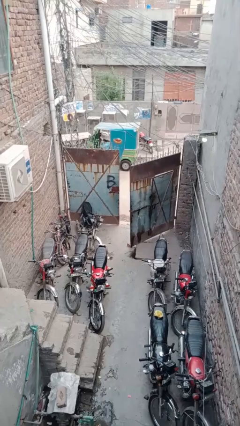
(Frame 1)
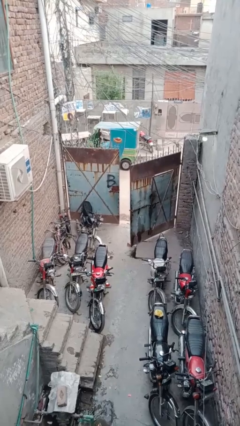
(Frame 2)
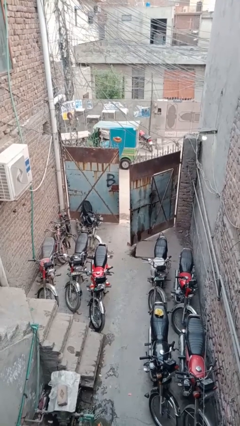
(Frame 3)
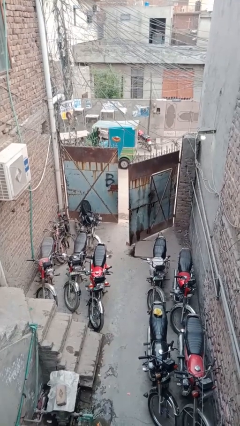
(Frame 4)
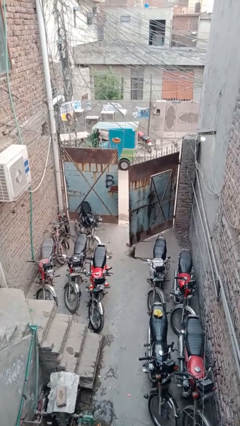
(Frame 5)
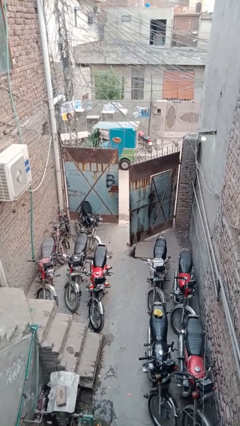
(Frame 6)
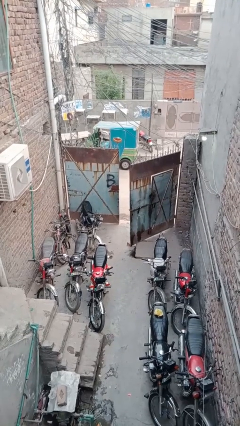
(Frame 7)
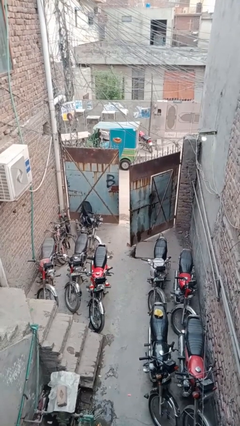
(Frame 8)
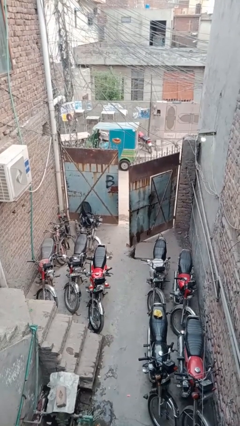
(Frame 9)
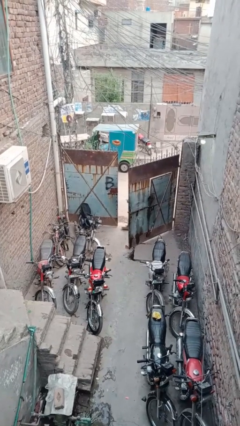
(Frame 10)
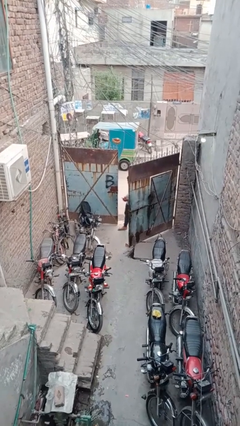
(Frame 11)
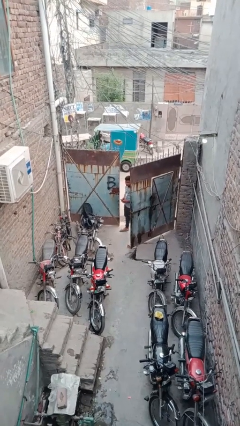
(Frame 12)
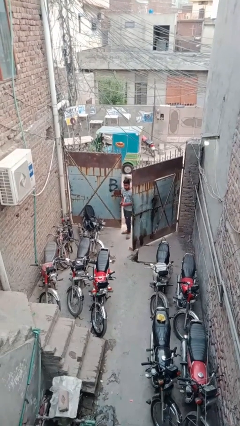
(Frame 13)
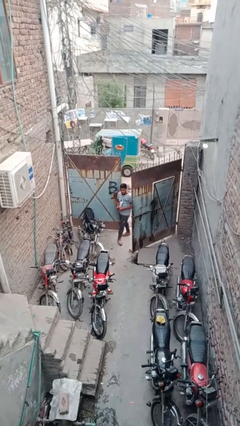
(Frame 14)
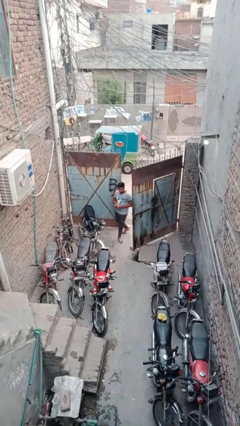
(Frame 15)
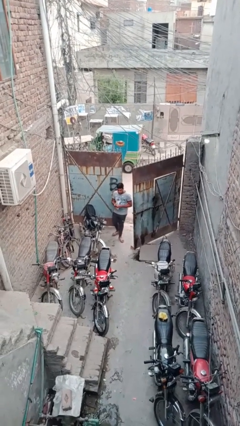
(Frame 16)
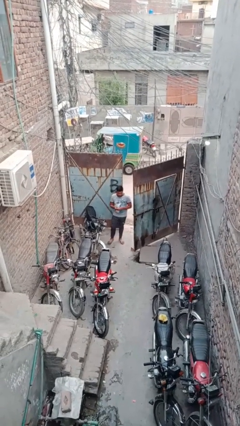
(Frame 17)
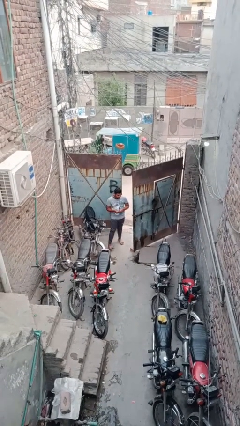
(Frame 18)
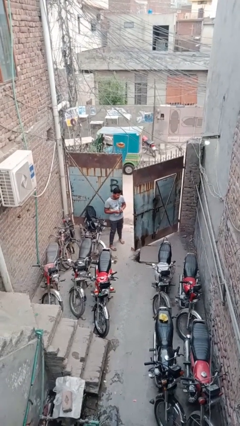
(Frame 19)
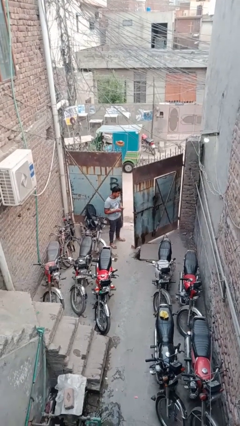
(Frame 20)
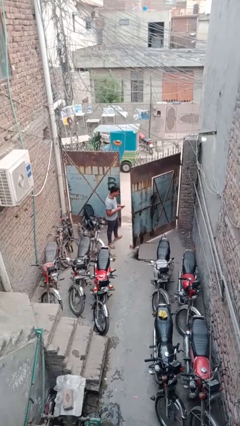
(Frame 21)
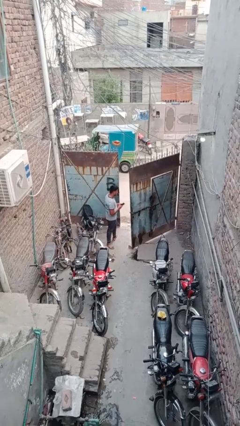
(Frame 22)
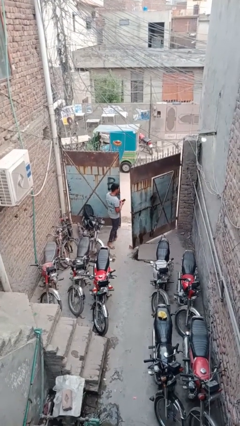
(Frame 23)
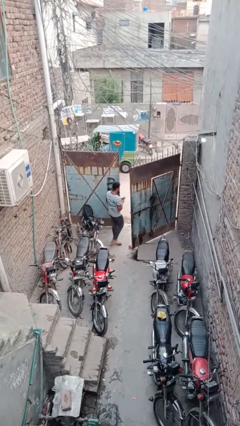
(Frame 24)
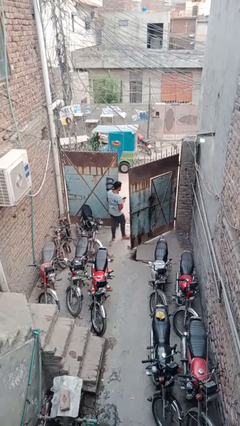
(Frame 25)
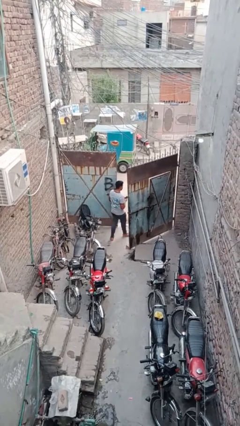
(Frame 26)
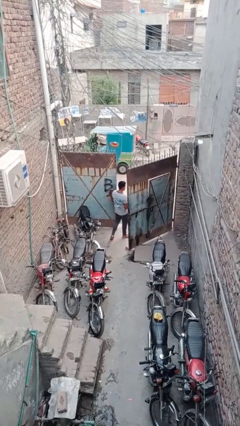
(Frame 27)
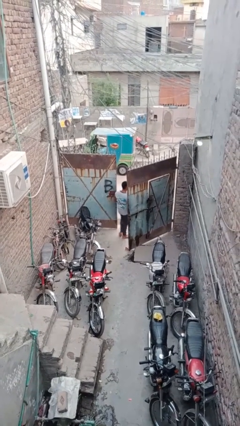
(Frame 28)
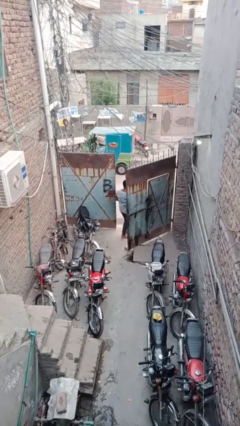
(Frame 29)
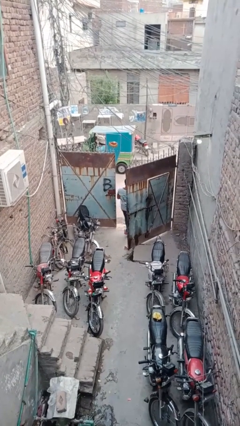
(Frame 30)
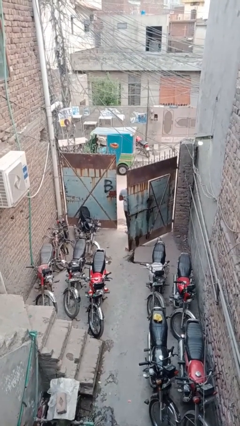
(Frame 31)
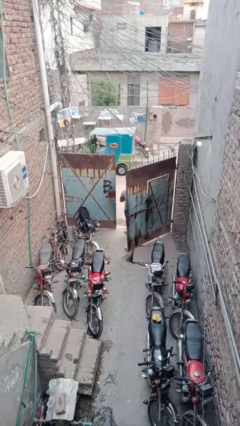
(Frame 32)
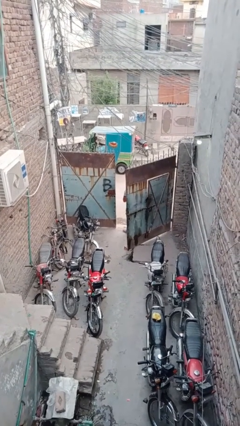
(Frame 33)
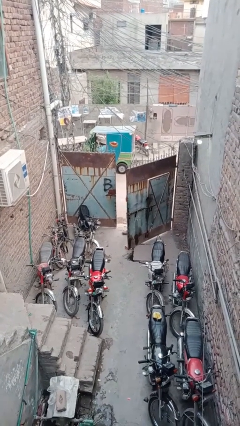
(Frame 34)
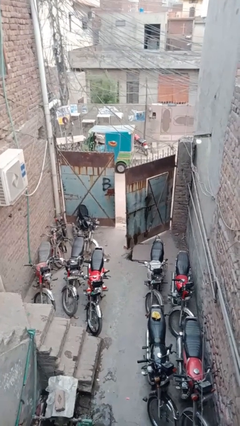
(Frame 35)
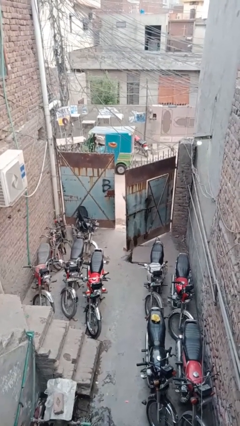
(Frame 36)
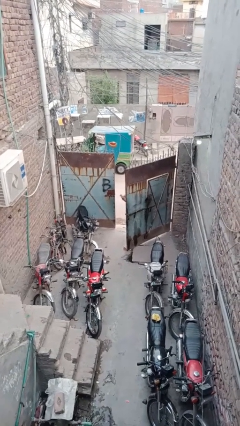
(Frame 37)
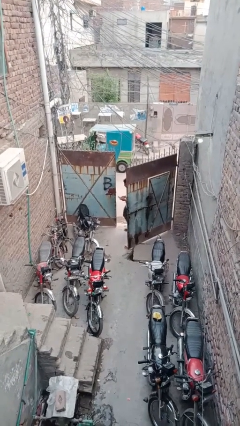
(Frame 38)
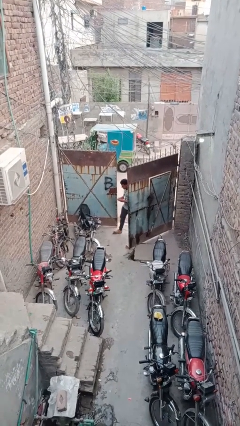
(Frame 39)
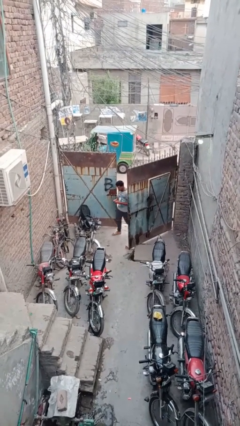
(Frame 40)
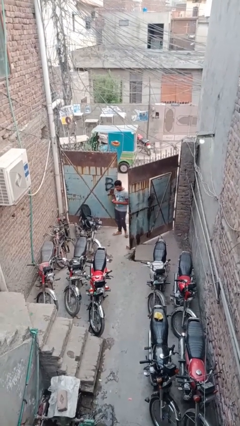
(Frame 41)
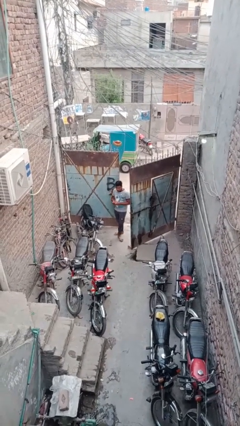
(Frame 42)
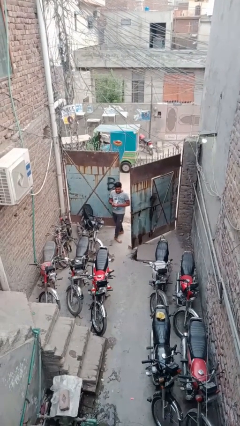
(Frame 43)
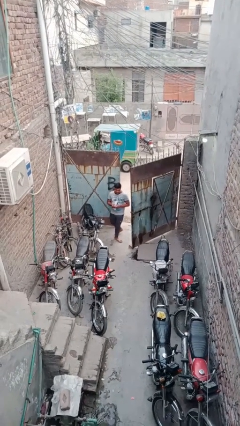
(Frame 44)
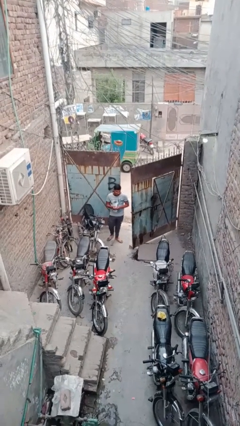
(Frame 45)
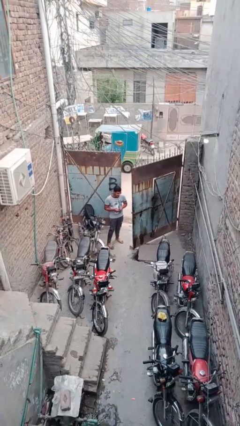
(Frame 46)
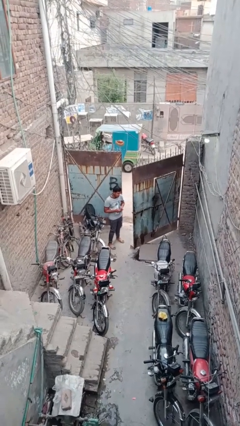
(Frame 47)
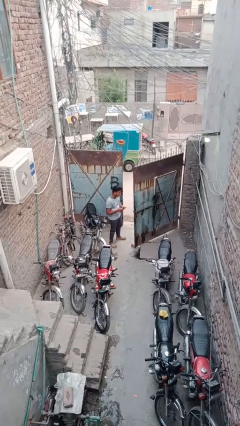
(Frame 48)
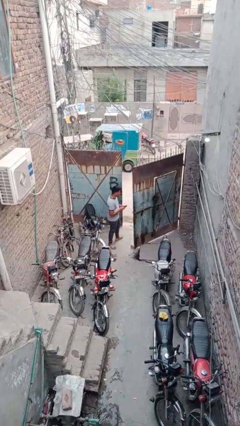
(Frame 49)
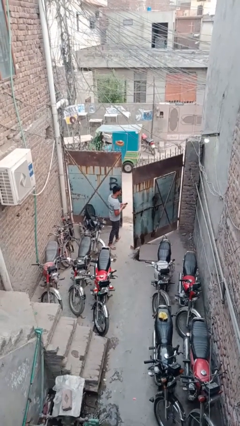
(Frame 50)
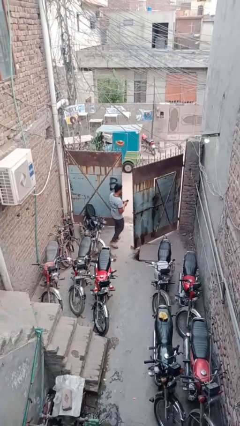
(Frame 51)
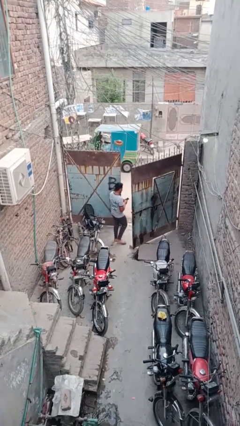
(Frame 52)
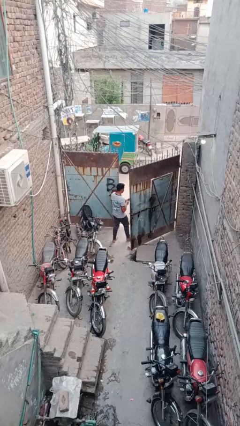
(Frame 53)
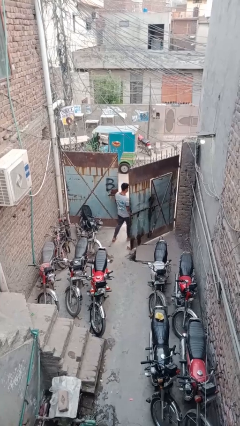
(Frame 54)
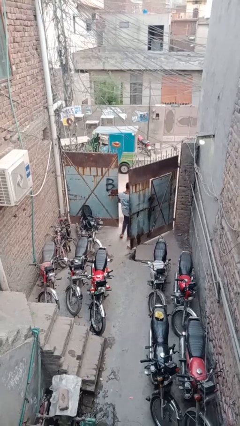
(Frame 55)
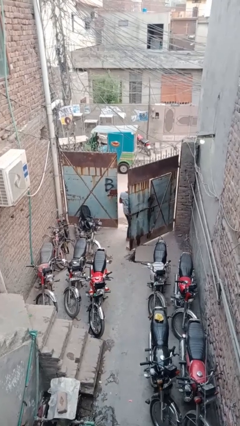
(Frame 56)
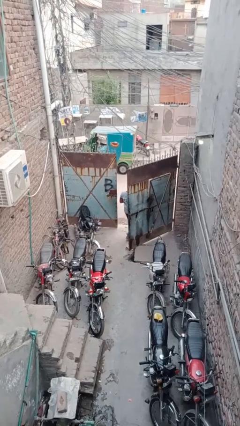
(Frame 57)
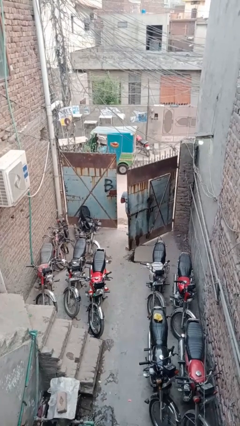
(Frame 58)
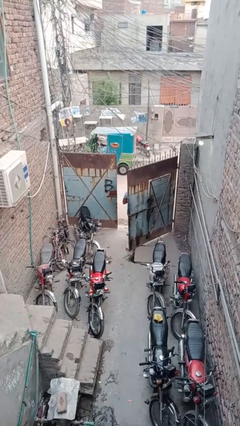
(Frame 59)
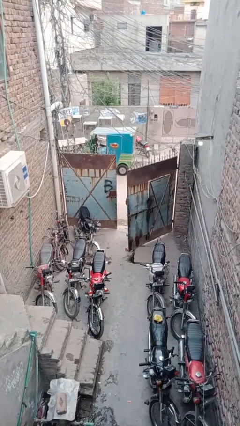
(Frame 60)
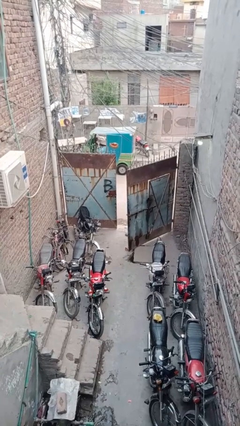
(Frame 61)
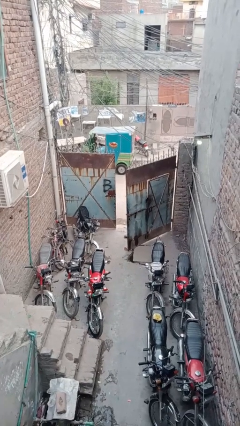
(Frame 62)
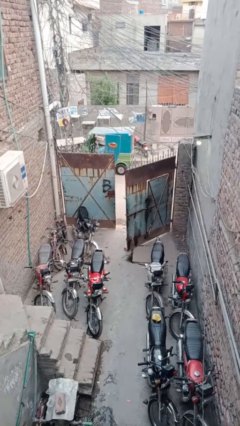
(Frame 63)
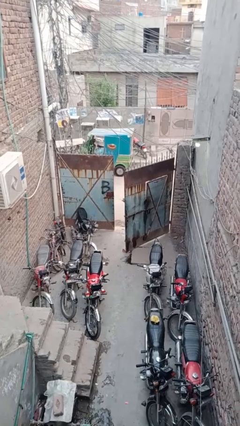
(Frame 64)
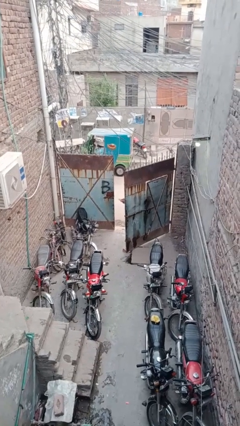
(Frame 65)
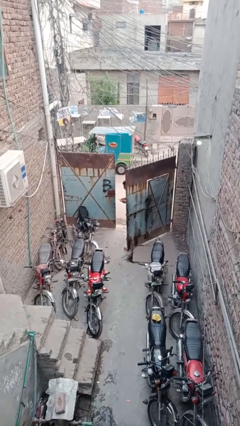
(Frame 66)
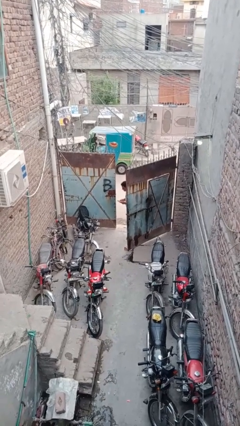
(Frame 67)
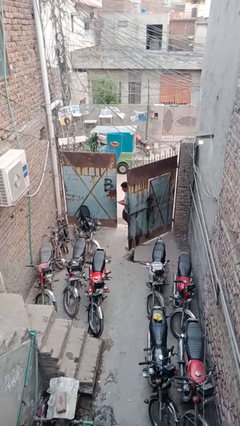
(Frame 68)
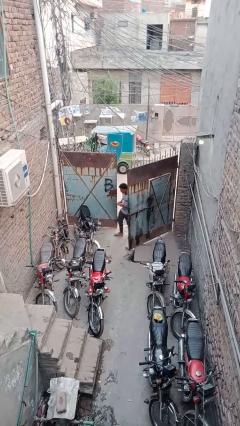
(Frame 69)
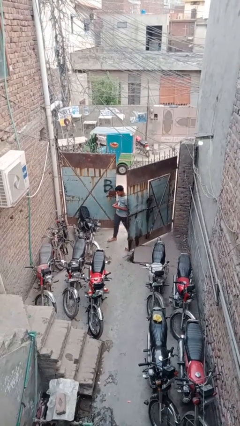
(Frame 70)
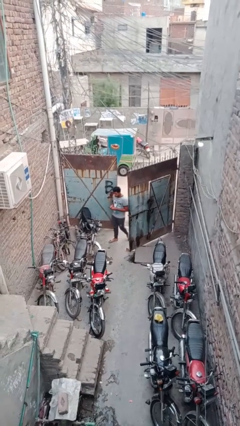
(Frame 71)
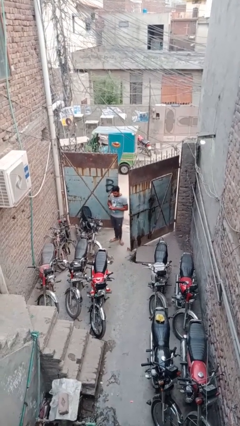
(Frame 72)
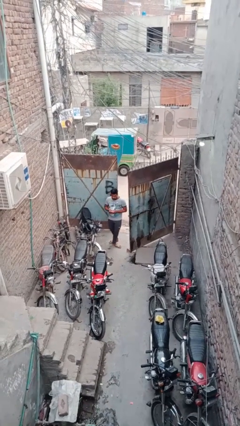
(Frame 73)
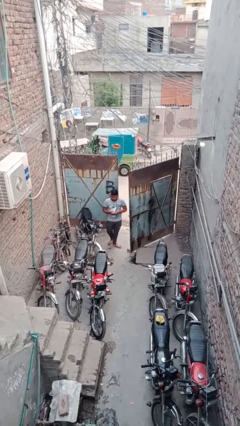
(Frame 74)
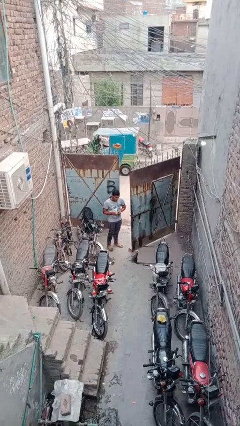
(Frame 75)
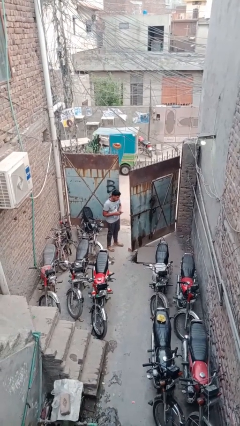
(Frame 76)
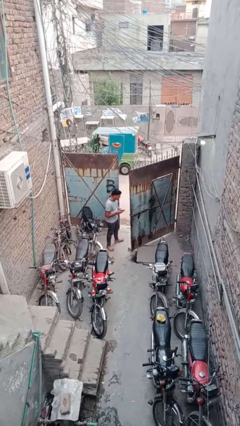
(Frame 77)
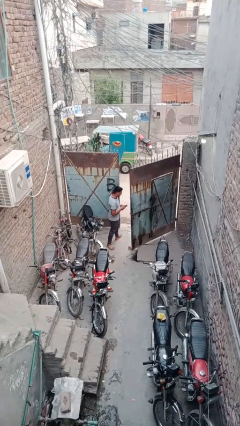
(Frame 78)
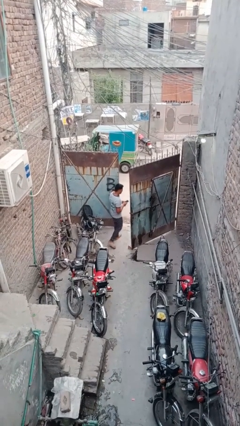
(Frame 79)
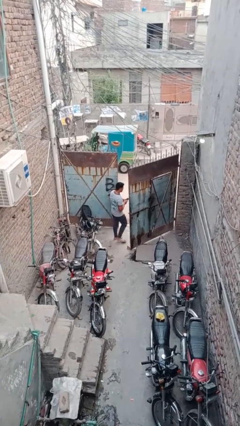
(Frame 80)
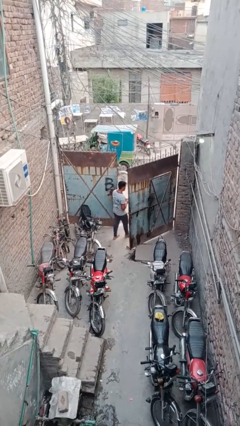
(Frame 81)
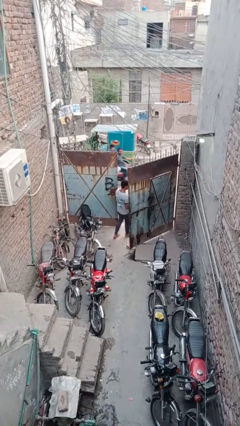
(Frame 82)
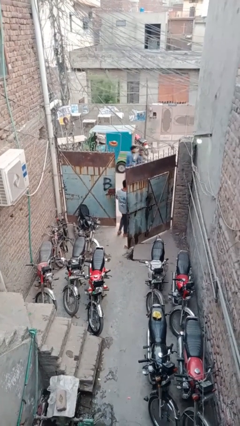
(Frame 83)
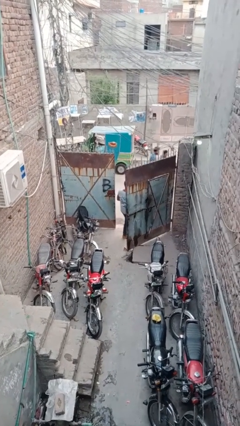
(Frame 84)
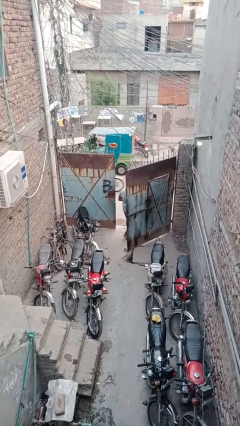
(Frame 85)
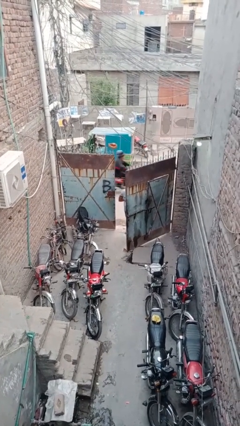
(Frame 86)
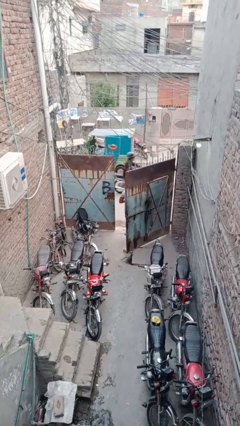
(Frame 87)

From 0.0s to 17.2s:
person texts on phone

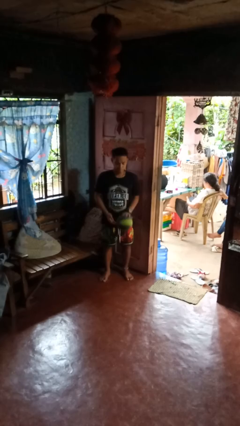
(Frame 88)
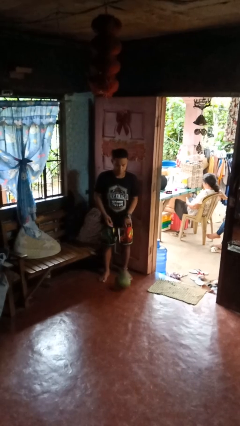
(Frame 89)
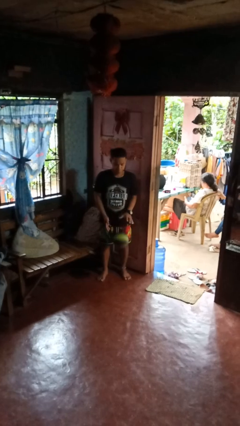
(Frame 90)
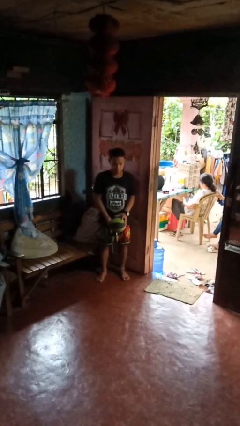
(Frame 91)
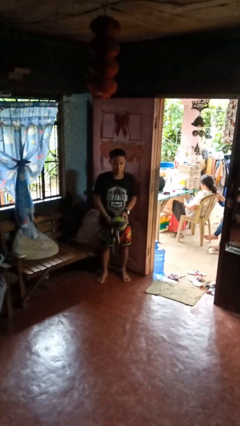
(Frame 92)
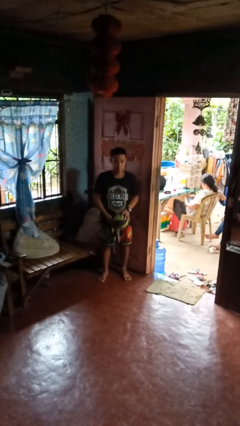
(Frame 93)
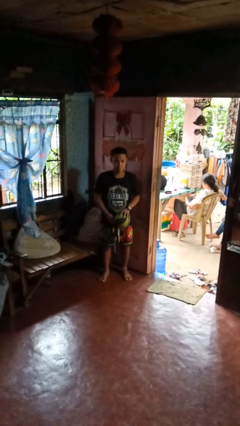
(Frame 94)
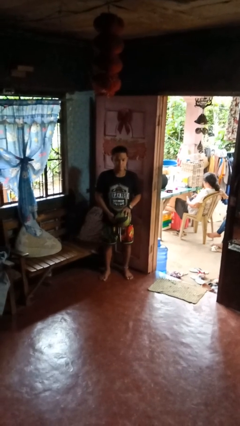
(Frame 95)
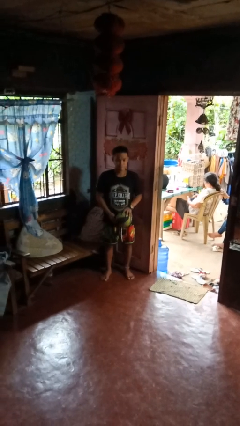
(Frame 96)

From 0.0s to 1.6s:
person bounces ball on floor
